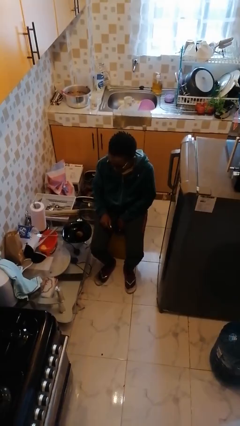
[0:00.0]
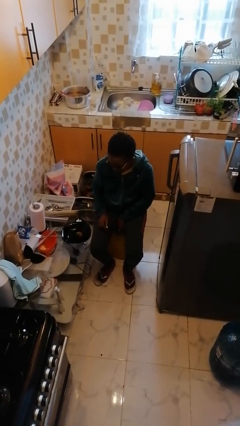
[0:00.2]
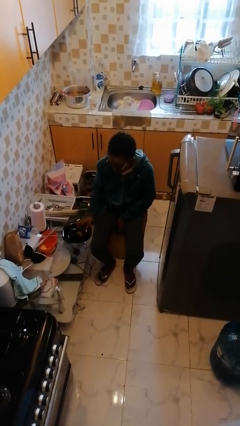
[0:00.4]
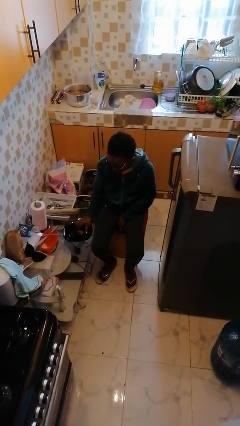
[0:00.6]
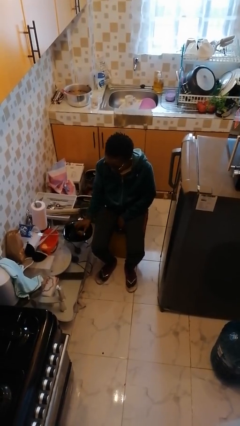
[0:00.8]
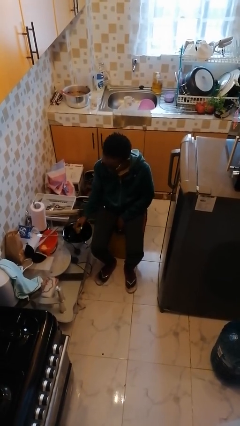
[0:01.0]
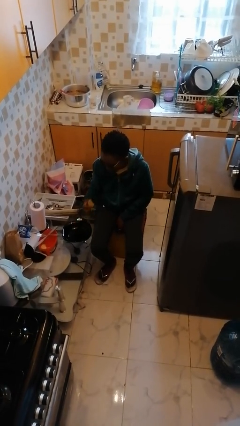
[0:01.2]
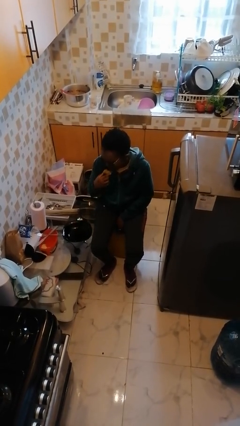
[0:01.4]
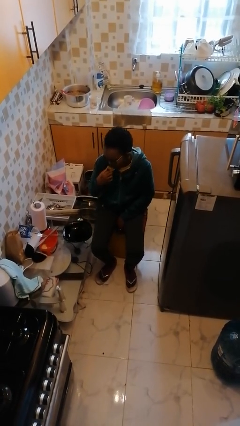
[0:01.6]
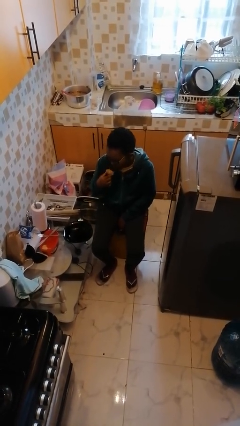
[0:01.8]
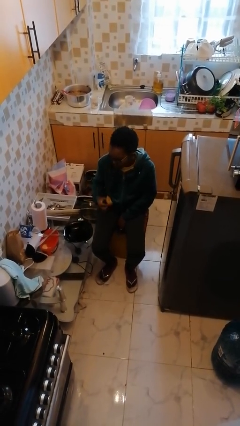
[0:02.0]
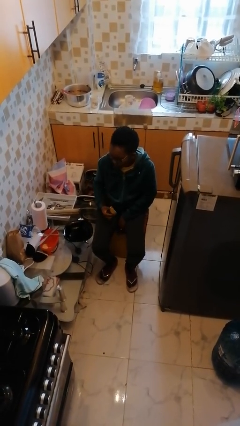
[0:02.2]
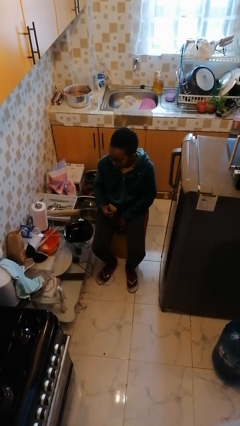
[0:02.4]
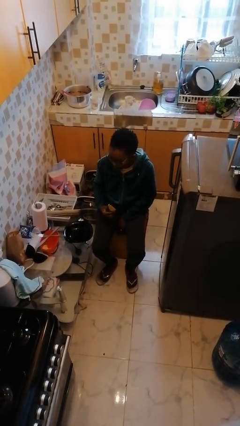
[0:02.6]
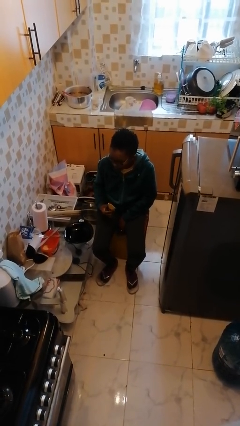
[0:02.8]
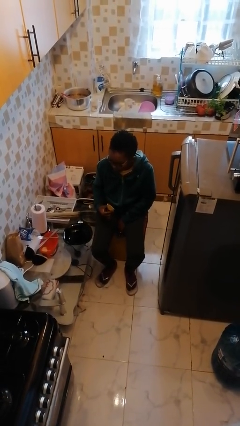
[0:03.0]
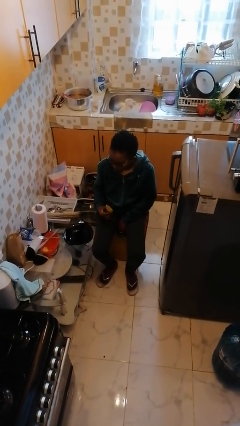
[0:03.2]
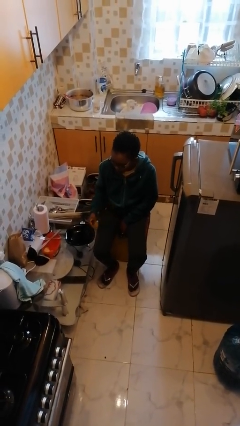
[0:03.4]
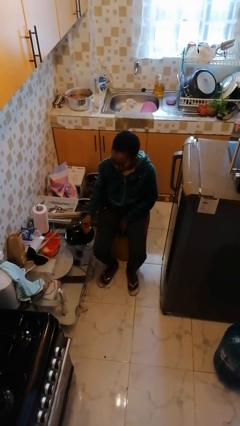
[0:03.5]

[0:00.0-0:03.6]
person eats with hands

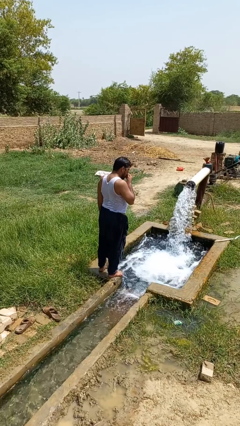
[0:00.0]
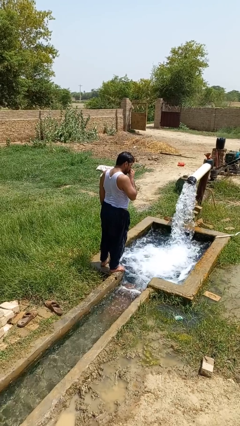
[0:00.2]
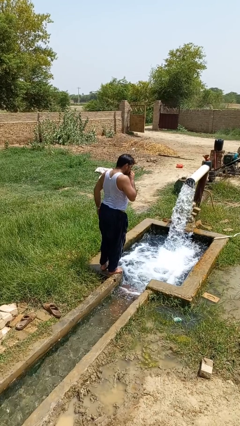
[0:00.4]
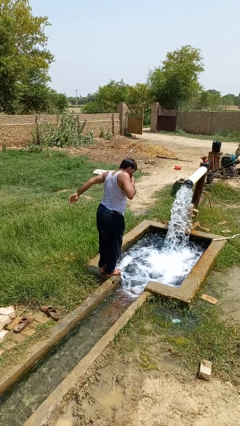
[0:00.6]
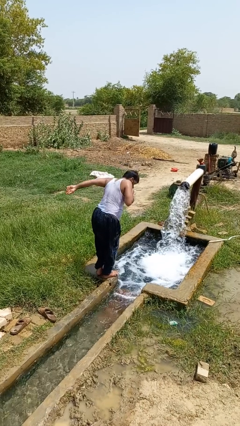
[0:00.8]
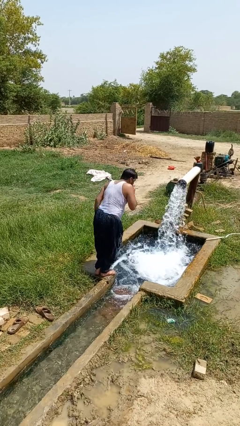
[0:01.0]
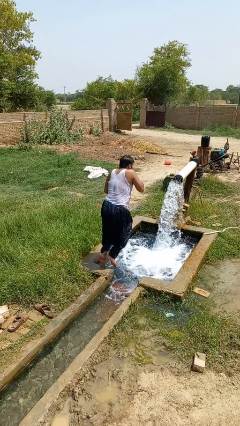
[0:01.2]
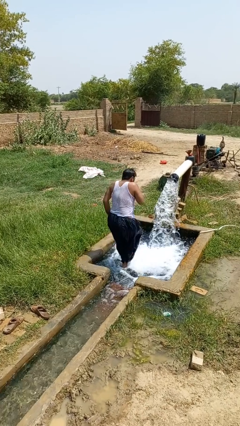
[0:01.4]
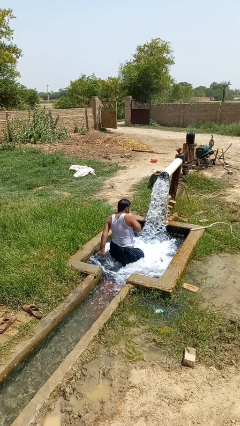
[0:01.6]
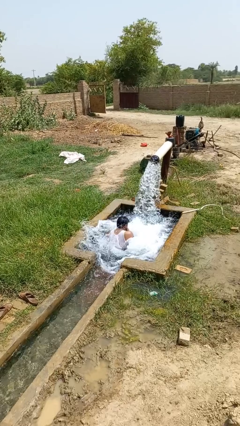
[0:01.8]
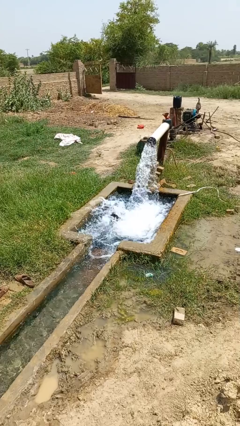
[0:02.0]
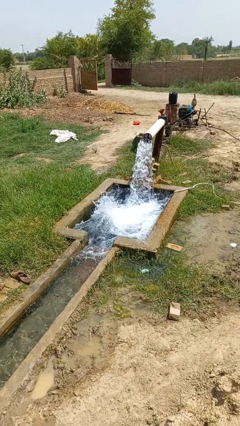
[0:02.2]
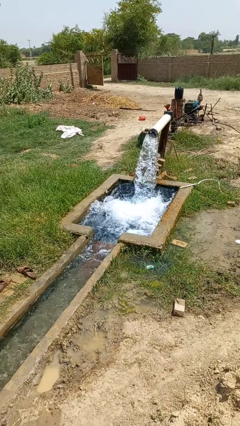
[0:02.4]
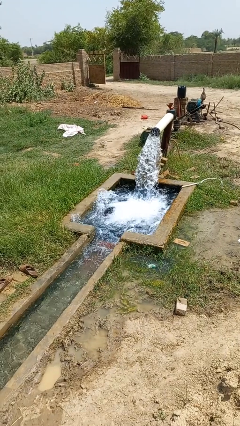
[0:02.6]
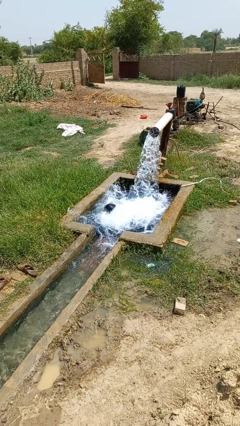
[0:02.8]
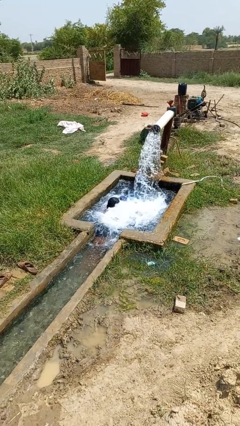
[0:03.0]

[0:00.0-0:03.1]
person jumps into pool

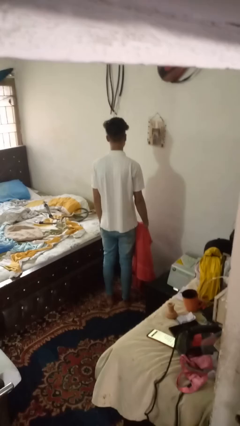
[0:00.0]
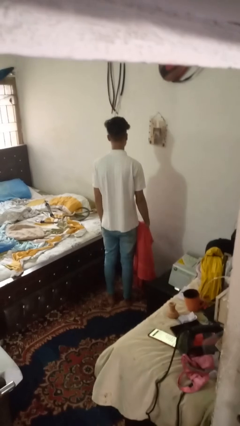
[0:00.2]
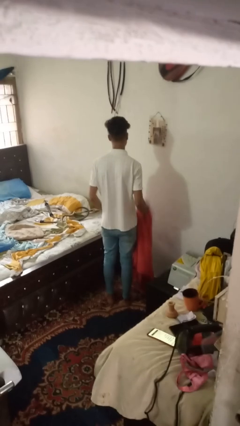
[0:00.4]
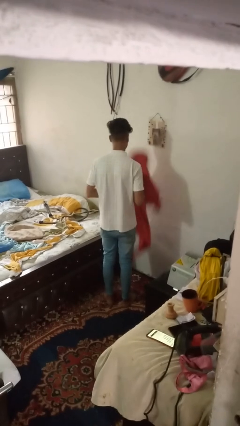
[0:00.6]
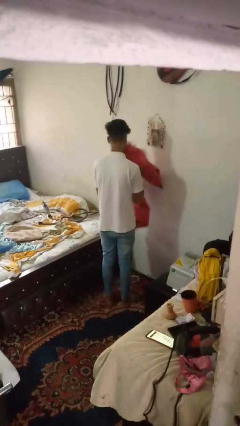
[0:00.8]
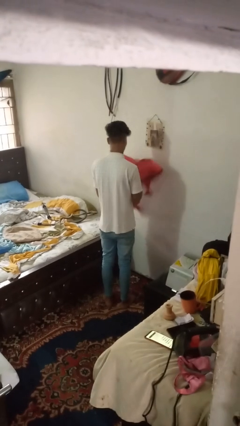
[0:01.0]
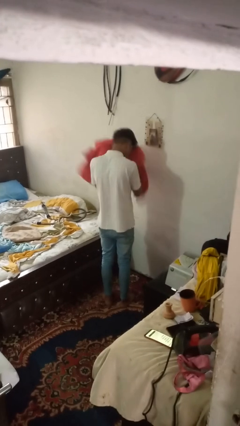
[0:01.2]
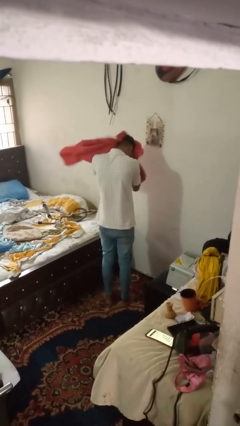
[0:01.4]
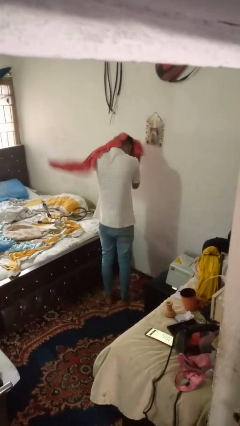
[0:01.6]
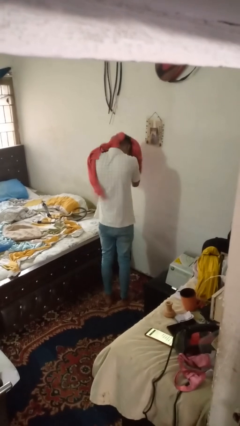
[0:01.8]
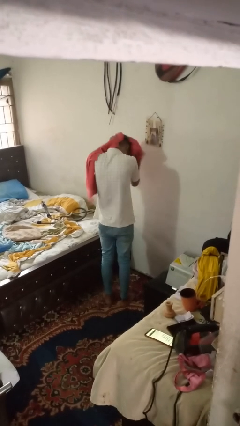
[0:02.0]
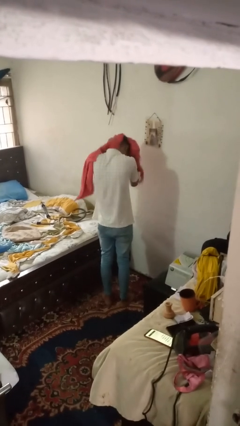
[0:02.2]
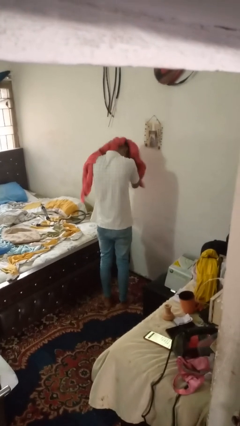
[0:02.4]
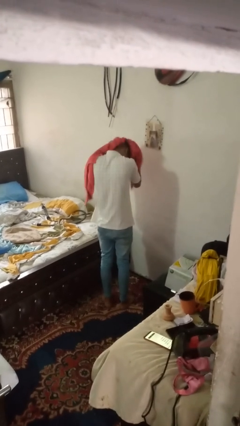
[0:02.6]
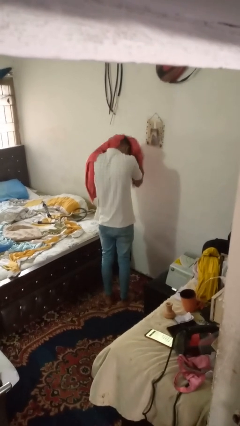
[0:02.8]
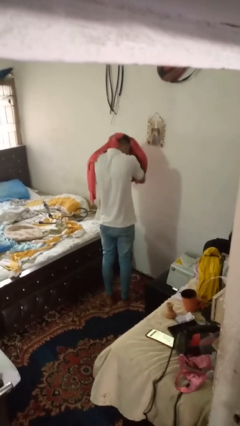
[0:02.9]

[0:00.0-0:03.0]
person dries hair with towel

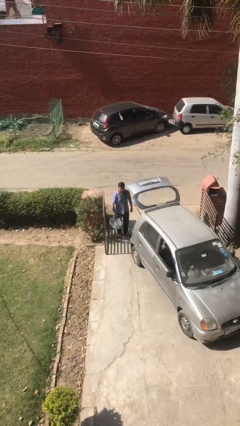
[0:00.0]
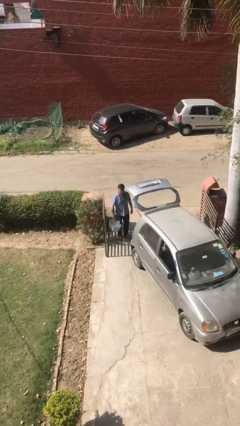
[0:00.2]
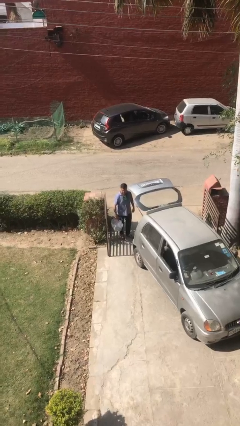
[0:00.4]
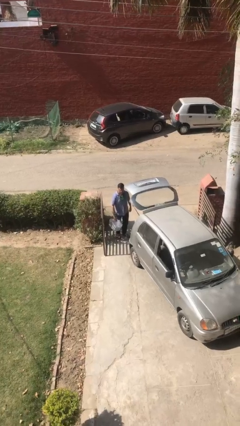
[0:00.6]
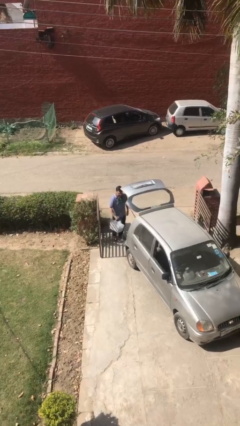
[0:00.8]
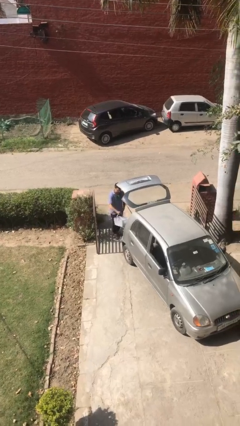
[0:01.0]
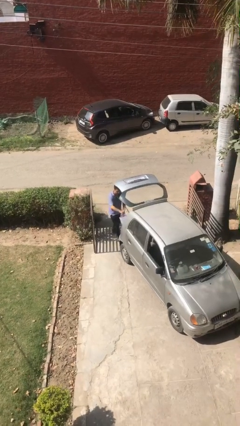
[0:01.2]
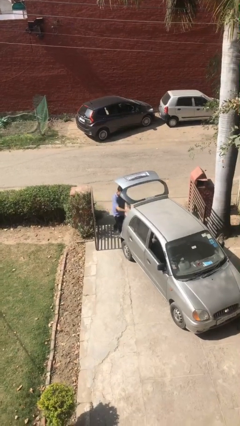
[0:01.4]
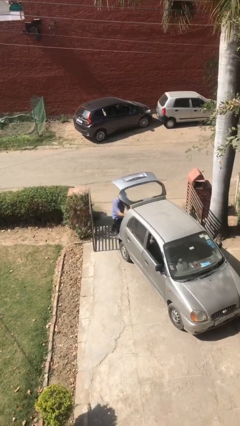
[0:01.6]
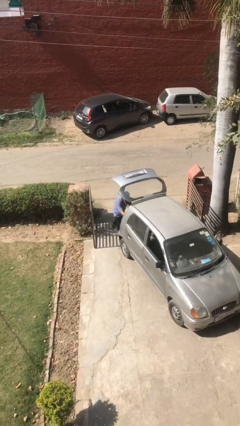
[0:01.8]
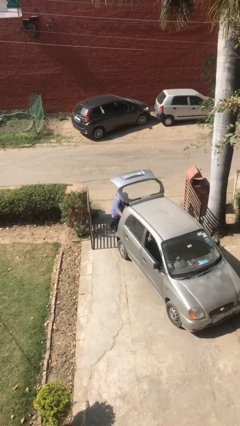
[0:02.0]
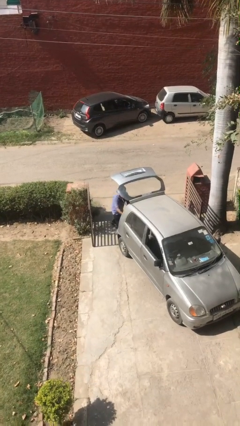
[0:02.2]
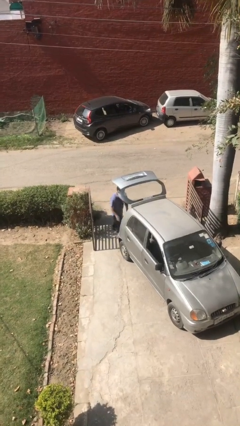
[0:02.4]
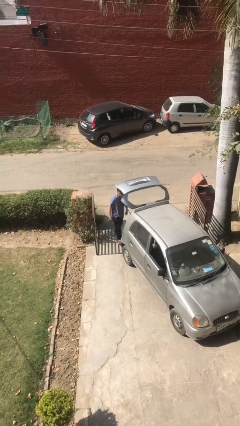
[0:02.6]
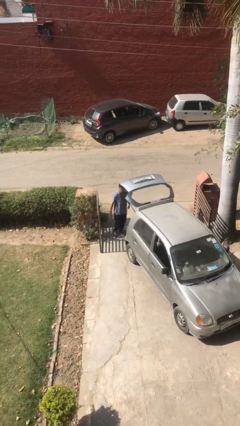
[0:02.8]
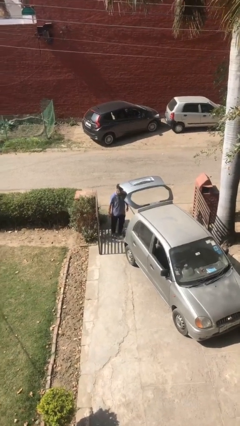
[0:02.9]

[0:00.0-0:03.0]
person loads car

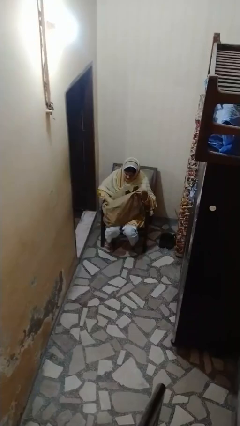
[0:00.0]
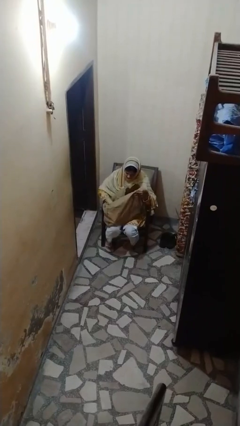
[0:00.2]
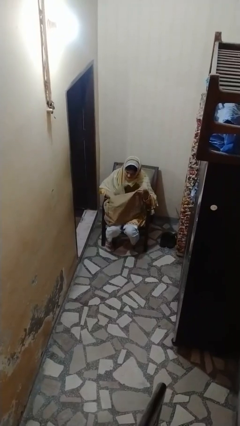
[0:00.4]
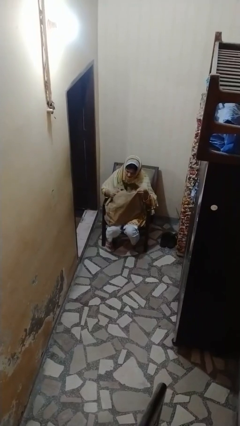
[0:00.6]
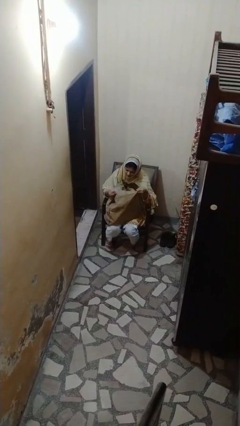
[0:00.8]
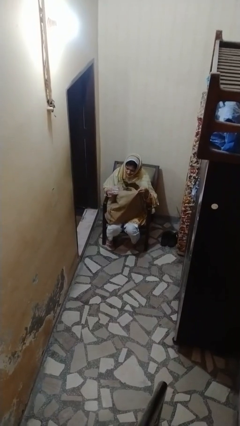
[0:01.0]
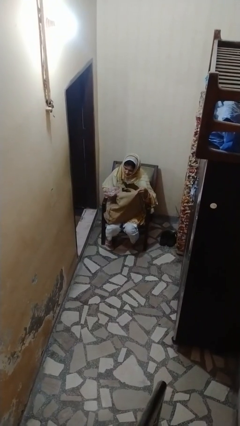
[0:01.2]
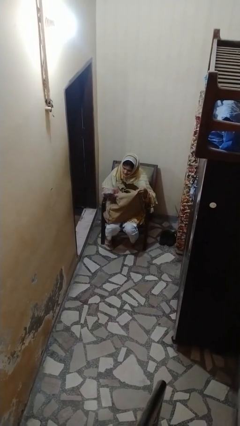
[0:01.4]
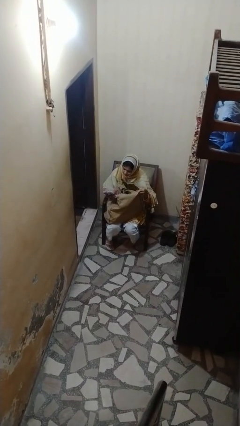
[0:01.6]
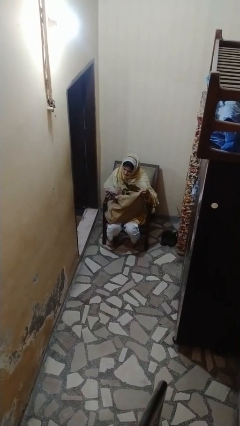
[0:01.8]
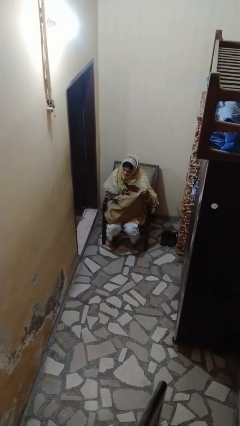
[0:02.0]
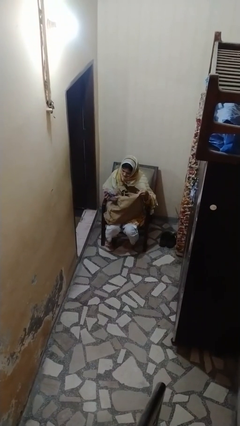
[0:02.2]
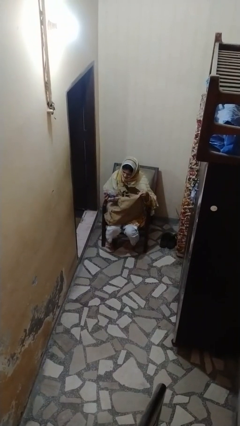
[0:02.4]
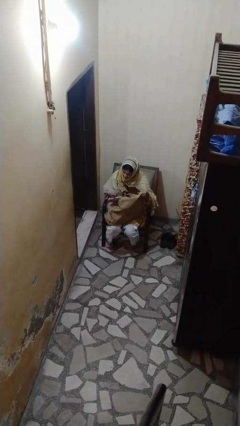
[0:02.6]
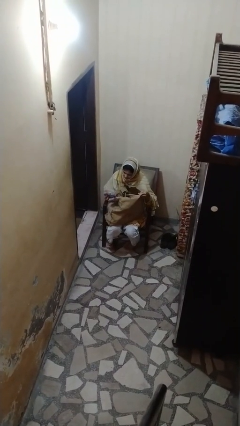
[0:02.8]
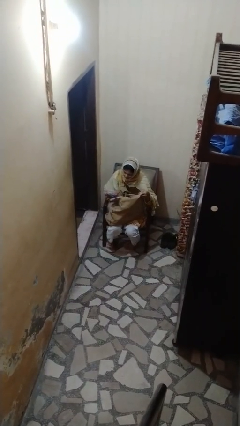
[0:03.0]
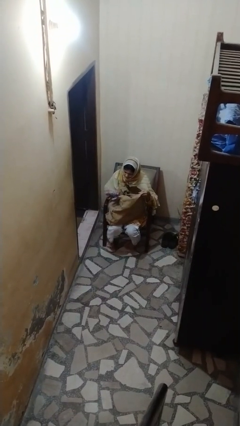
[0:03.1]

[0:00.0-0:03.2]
person takes object from bag

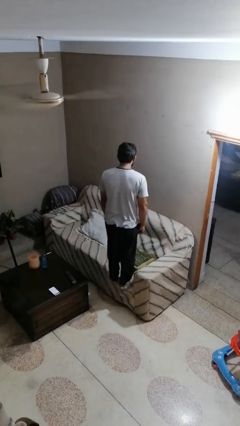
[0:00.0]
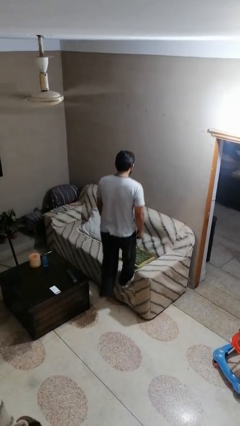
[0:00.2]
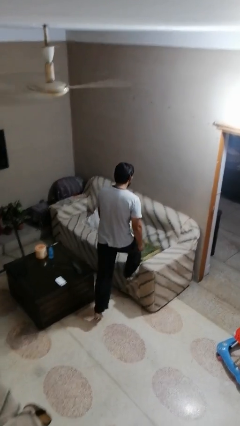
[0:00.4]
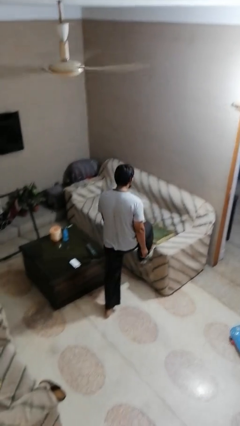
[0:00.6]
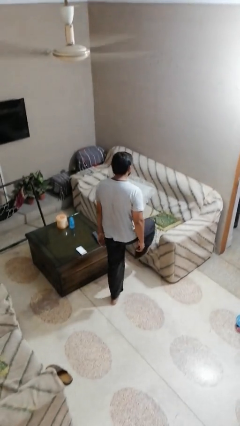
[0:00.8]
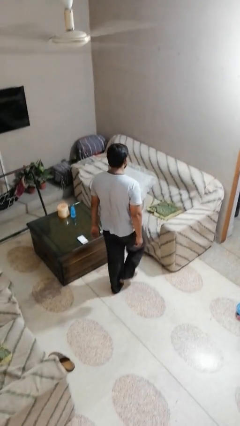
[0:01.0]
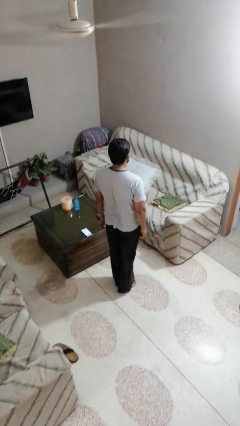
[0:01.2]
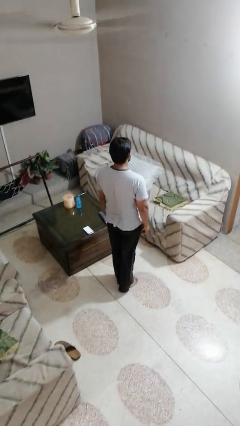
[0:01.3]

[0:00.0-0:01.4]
person climbs off couch

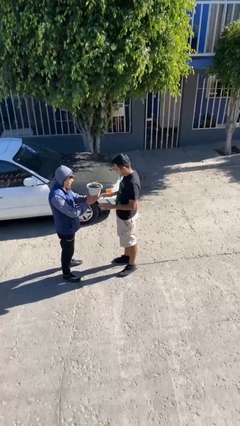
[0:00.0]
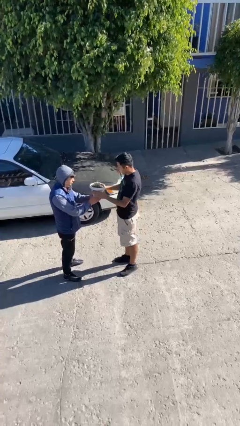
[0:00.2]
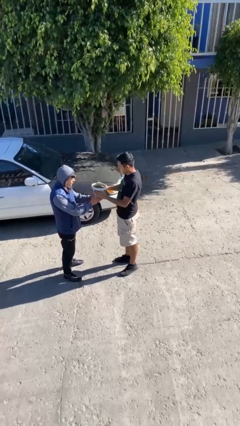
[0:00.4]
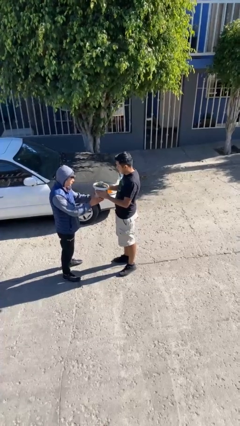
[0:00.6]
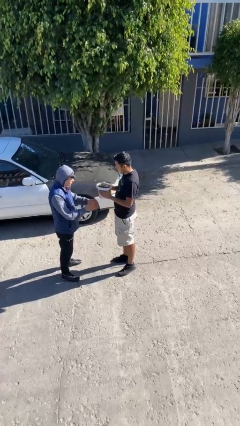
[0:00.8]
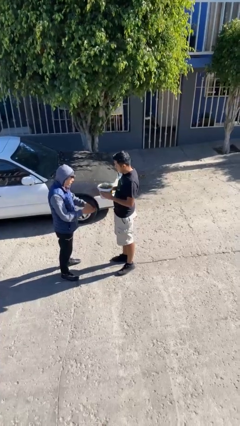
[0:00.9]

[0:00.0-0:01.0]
person transfers object to person
